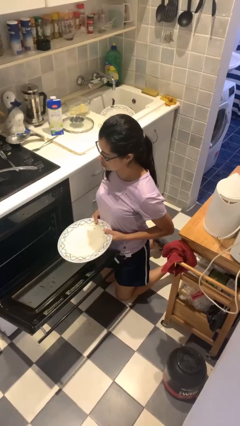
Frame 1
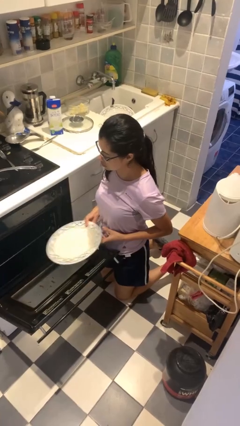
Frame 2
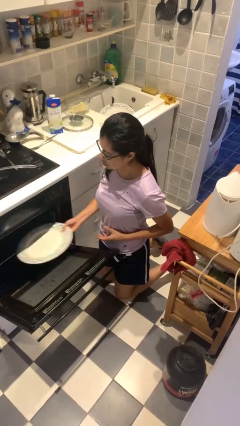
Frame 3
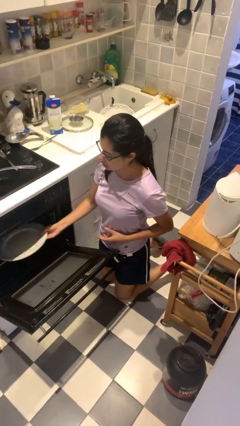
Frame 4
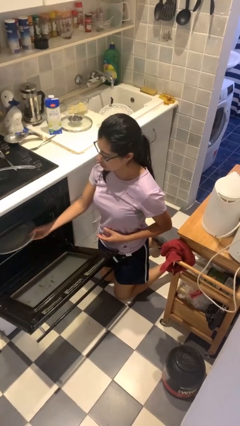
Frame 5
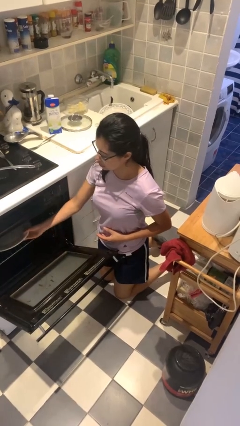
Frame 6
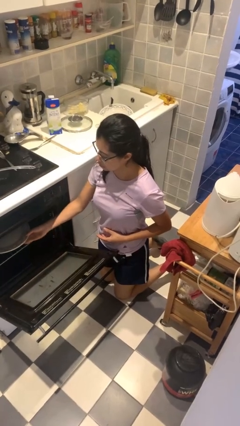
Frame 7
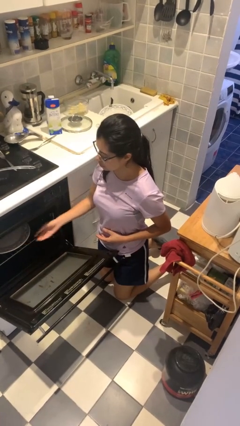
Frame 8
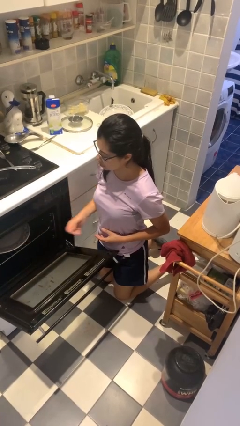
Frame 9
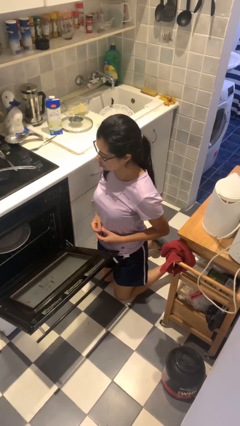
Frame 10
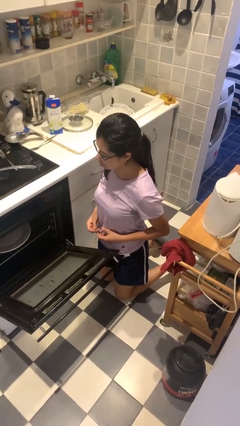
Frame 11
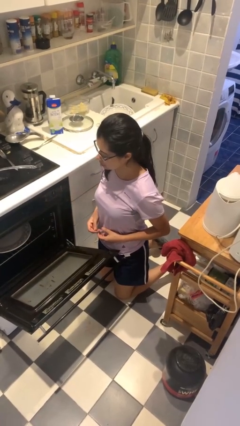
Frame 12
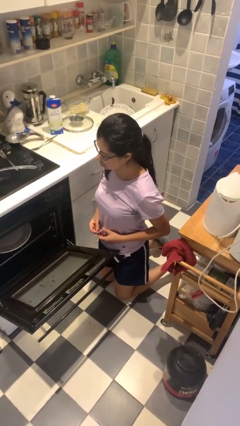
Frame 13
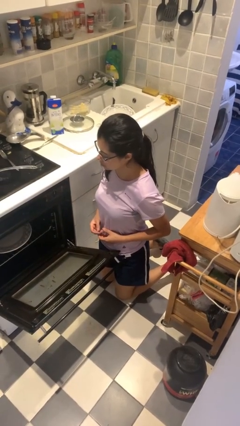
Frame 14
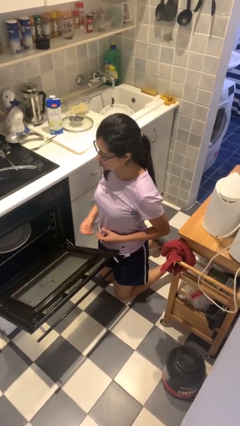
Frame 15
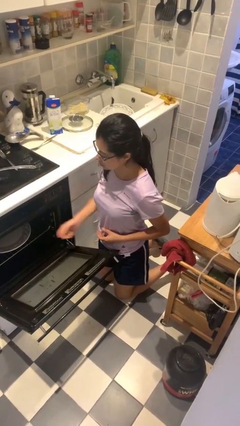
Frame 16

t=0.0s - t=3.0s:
person loads dishwasher

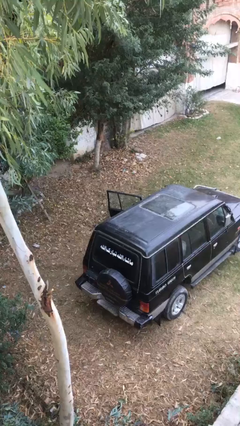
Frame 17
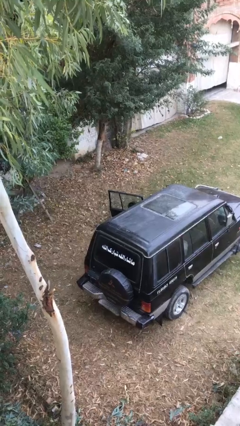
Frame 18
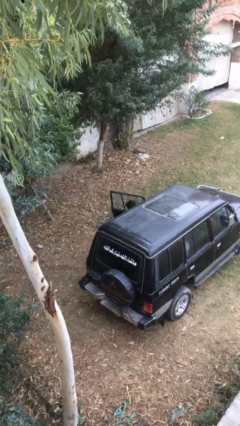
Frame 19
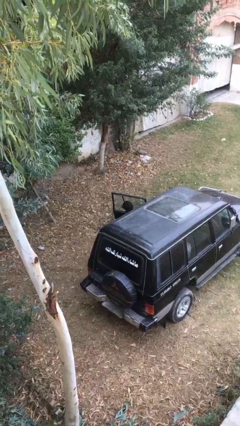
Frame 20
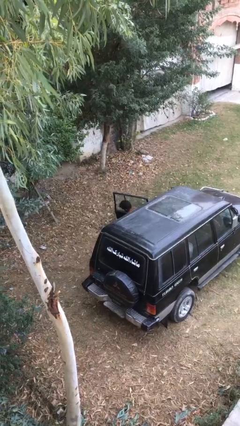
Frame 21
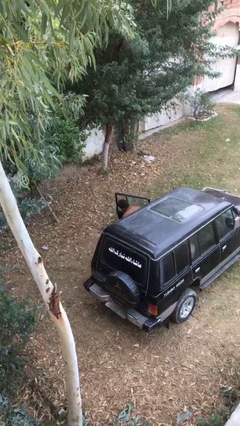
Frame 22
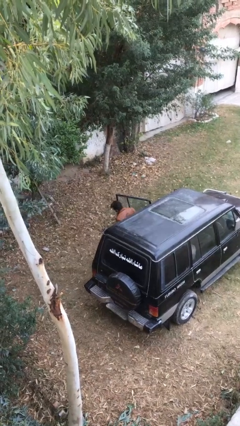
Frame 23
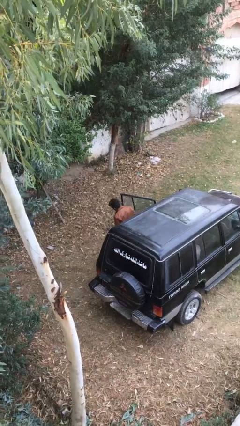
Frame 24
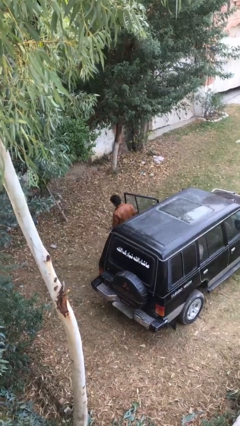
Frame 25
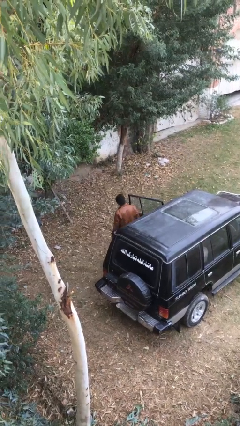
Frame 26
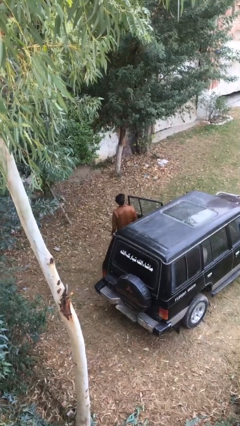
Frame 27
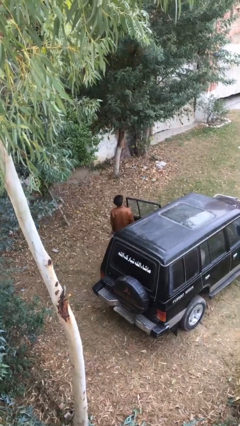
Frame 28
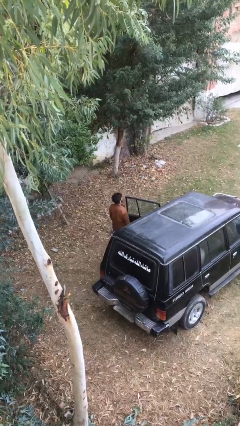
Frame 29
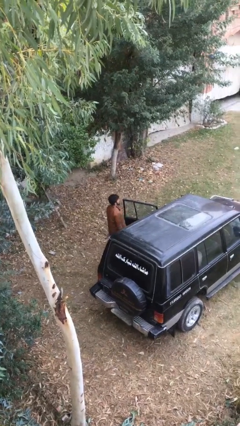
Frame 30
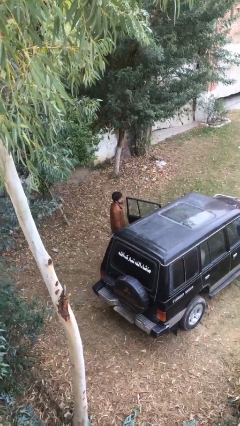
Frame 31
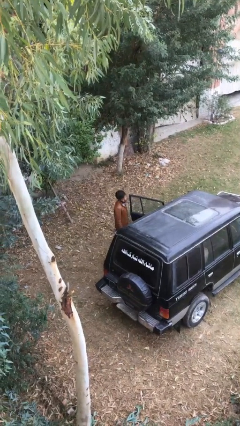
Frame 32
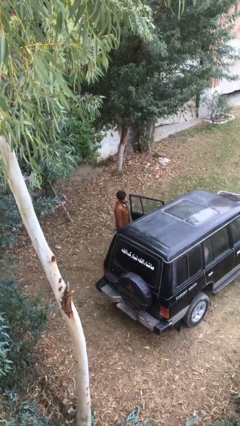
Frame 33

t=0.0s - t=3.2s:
person exits car

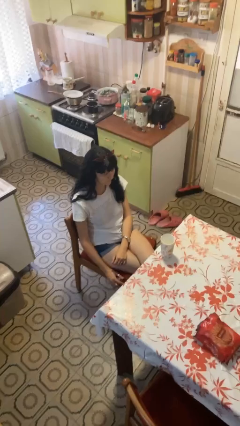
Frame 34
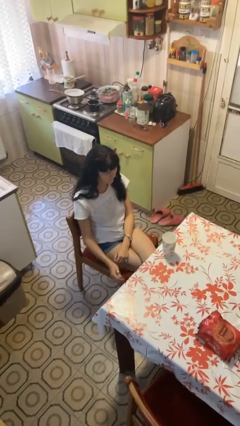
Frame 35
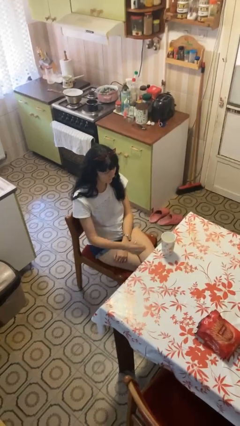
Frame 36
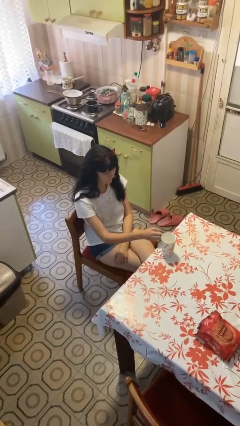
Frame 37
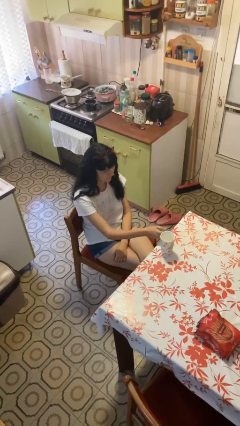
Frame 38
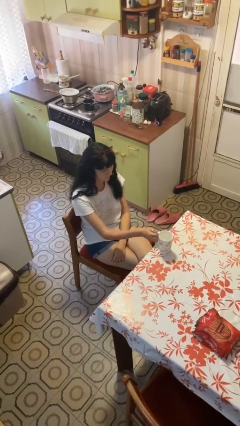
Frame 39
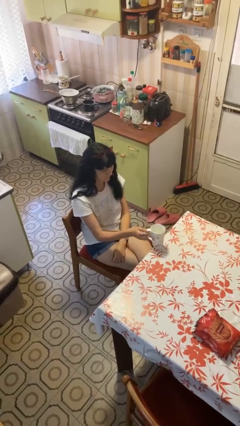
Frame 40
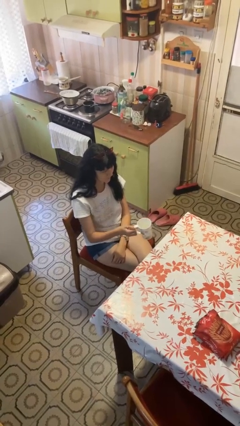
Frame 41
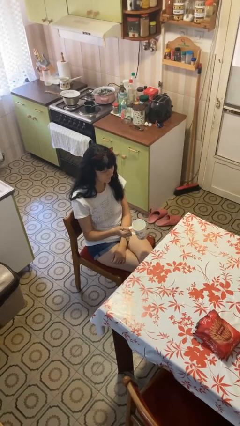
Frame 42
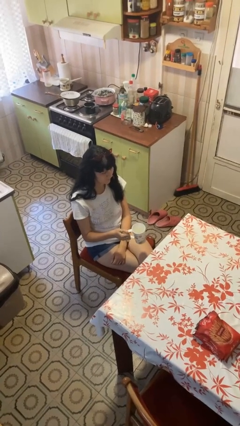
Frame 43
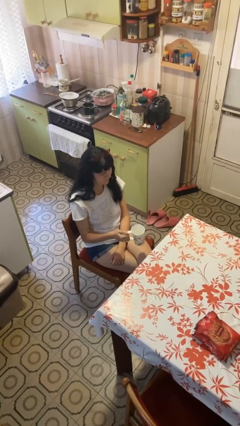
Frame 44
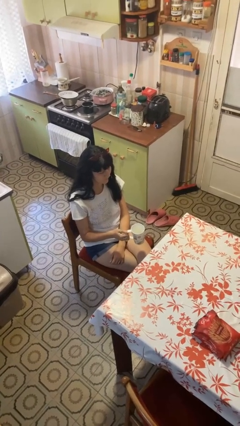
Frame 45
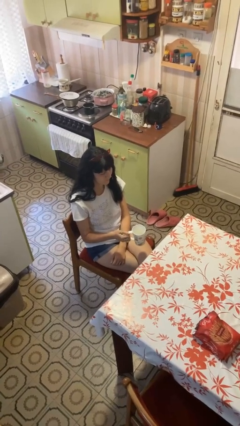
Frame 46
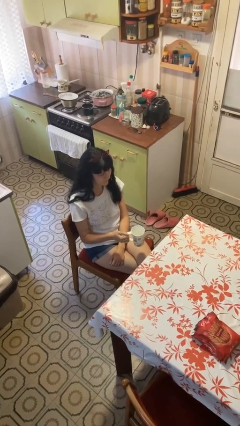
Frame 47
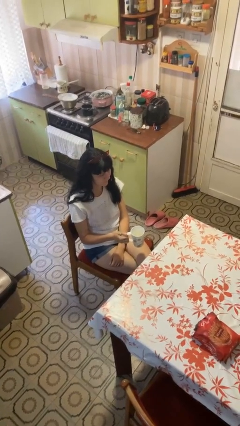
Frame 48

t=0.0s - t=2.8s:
person picks up object from table

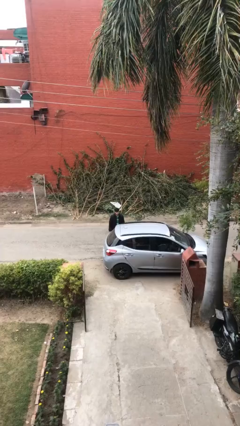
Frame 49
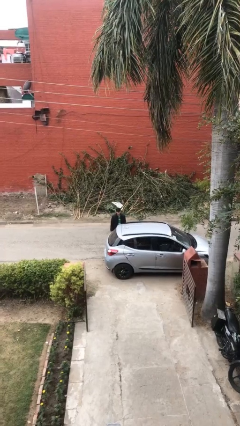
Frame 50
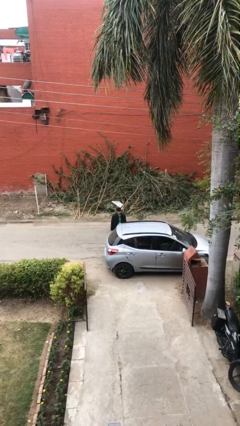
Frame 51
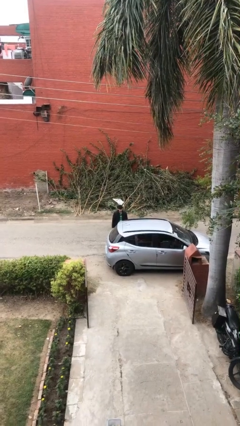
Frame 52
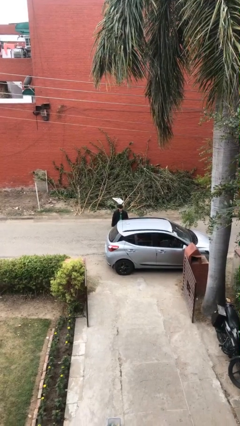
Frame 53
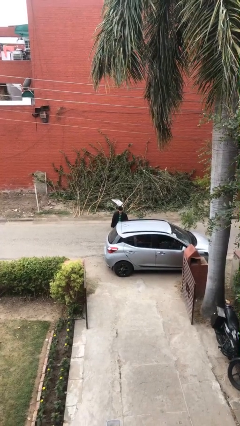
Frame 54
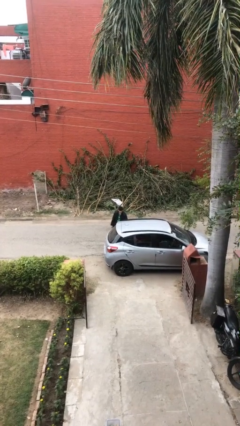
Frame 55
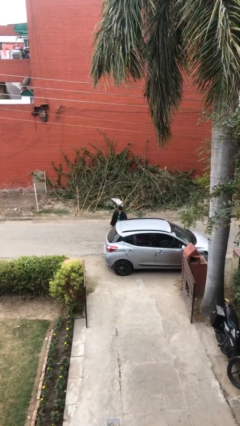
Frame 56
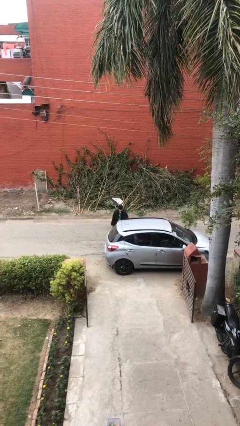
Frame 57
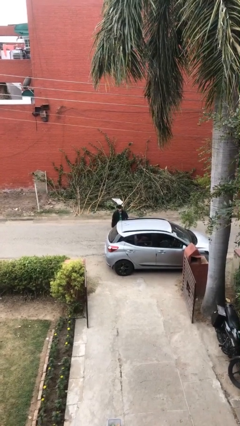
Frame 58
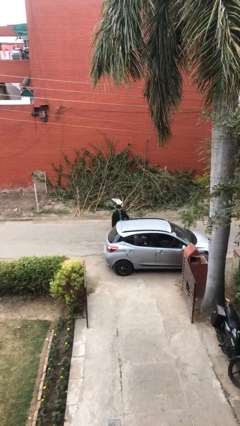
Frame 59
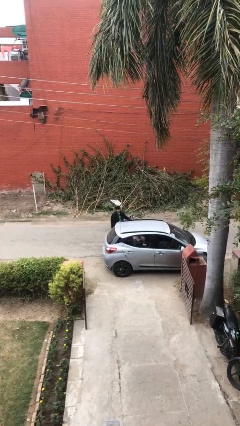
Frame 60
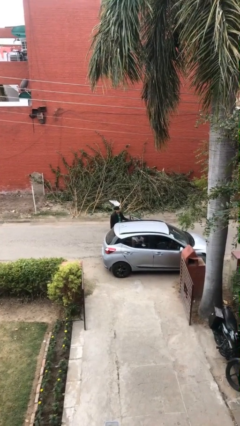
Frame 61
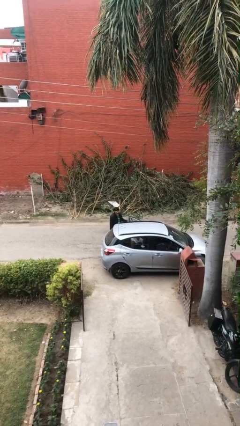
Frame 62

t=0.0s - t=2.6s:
person opens car door

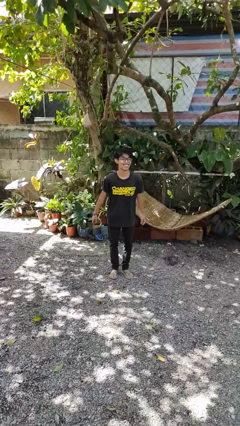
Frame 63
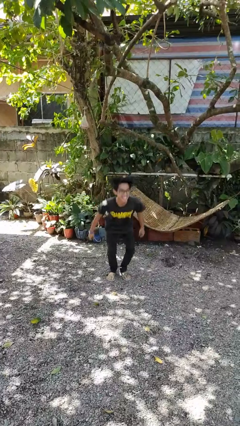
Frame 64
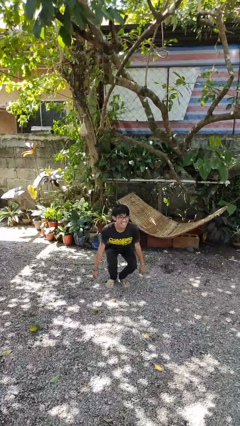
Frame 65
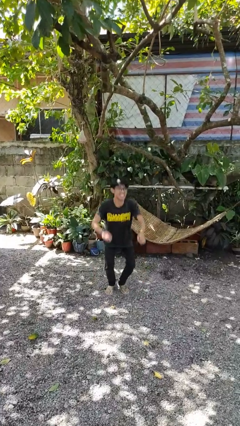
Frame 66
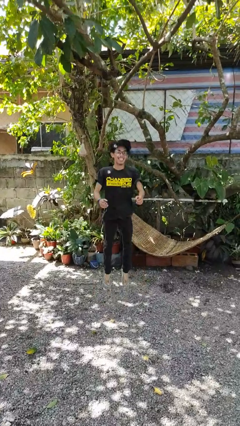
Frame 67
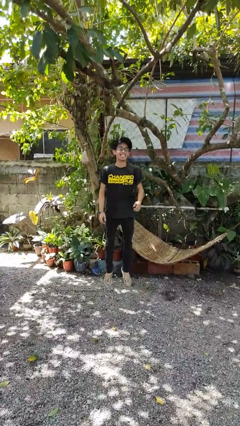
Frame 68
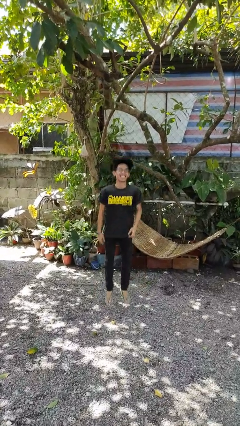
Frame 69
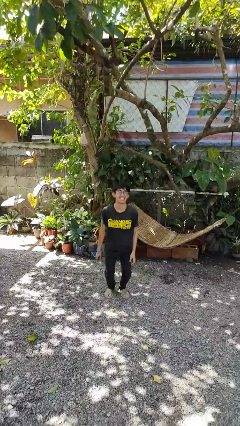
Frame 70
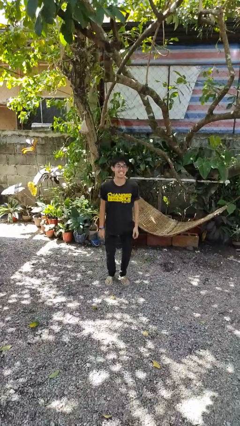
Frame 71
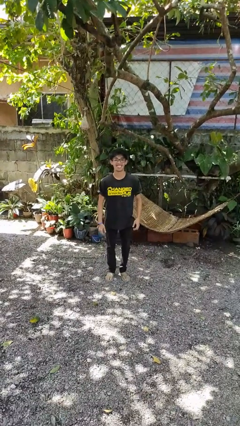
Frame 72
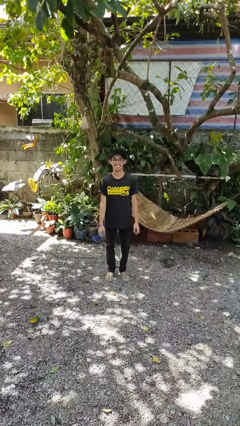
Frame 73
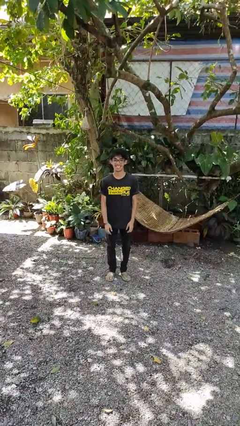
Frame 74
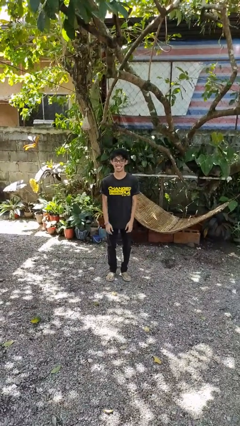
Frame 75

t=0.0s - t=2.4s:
person jumps

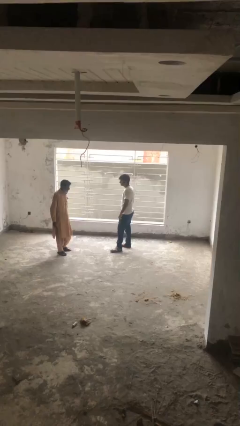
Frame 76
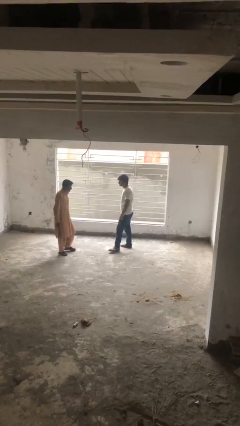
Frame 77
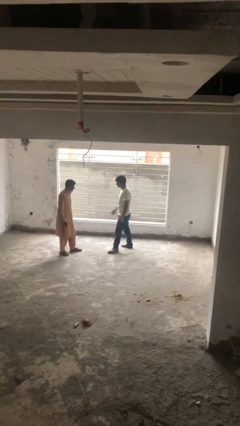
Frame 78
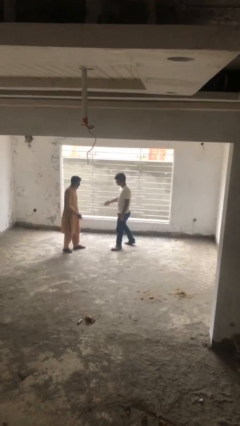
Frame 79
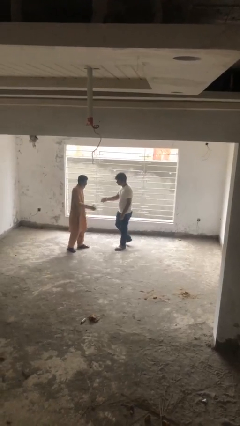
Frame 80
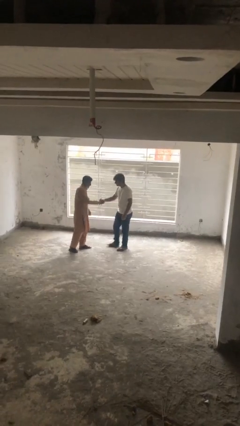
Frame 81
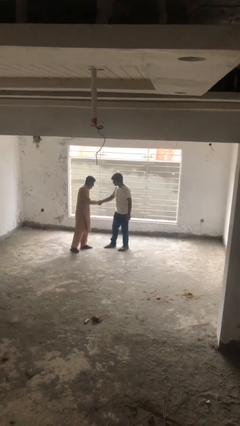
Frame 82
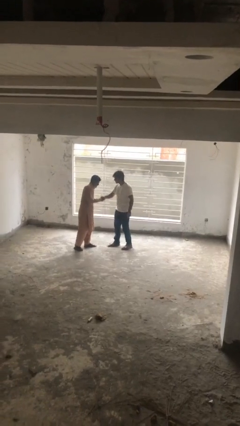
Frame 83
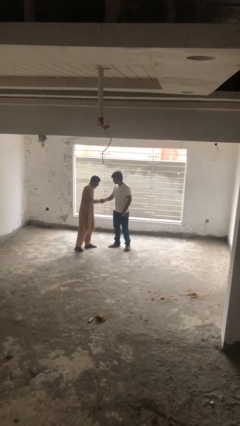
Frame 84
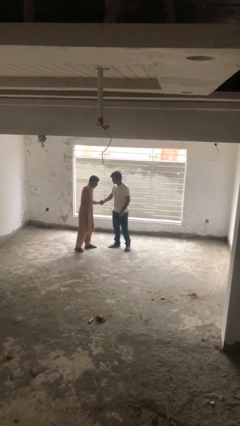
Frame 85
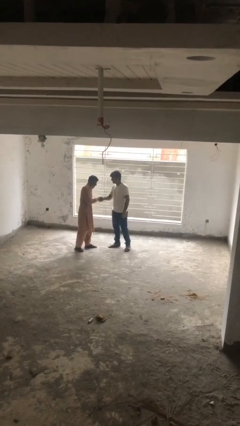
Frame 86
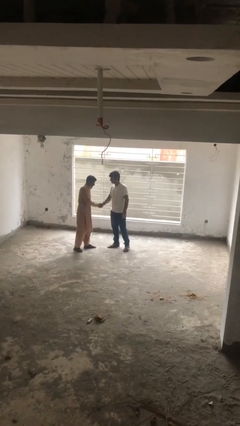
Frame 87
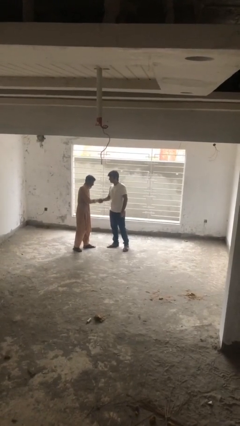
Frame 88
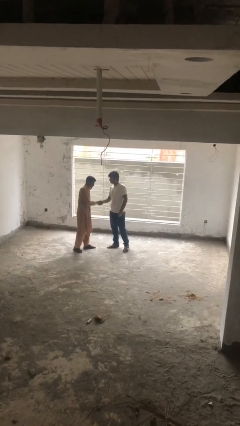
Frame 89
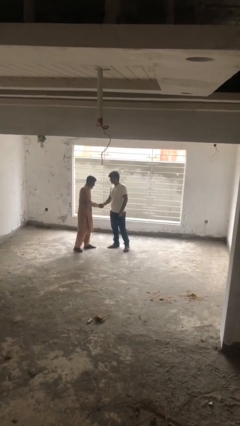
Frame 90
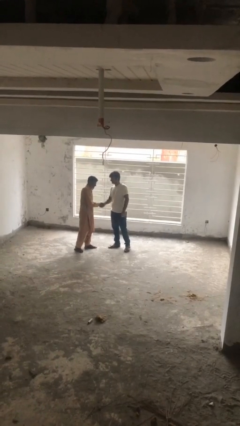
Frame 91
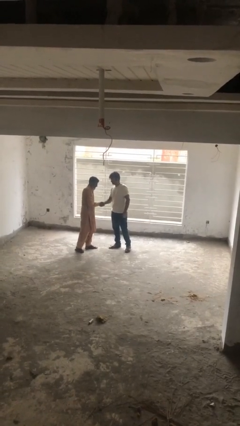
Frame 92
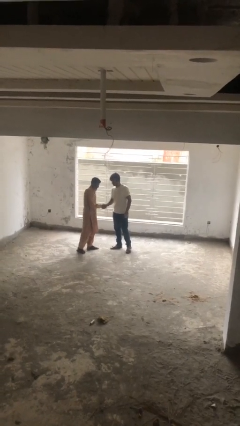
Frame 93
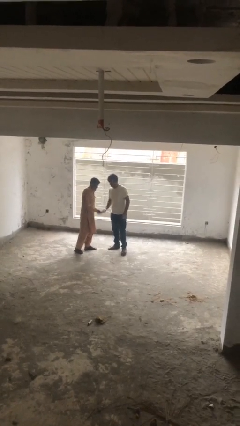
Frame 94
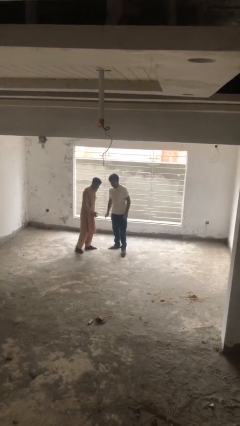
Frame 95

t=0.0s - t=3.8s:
person shakes hand
